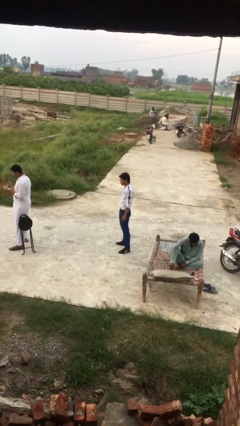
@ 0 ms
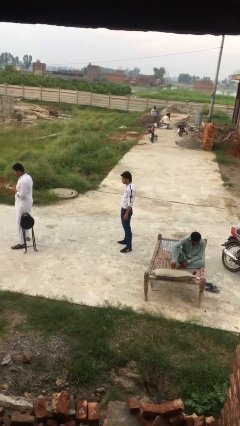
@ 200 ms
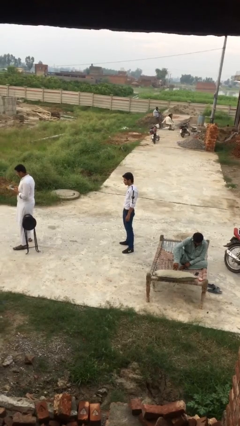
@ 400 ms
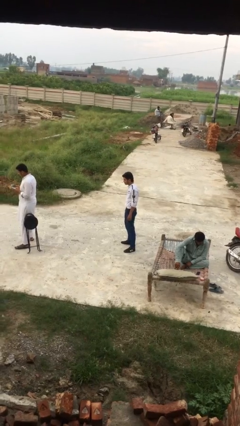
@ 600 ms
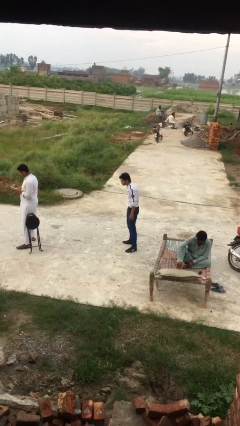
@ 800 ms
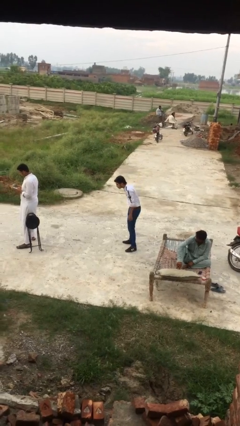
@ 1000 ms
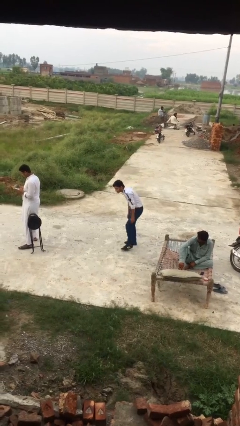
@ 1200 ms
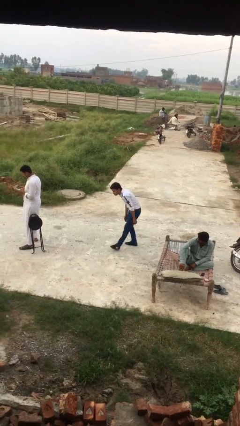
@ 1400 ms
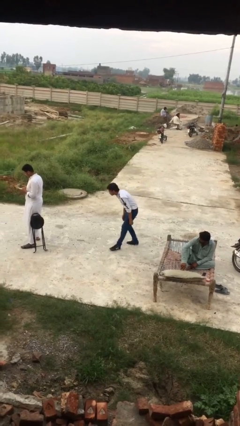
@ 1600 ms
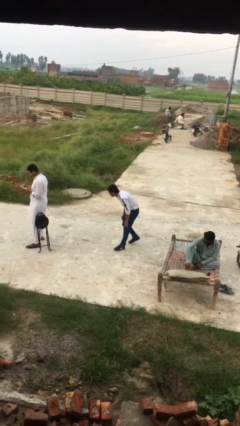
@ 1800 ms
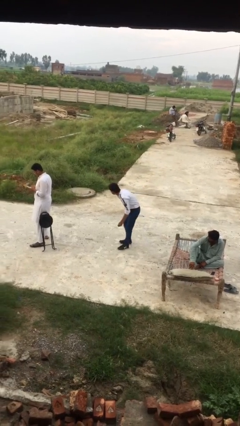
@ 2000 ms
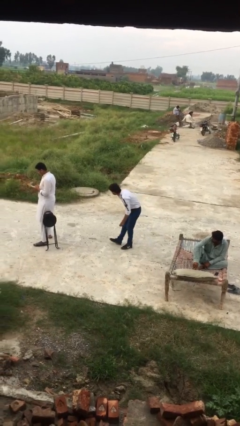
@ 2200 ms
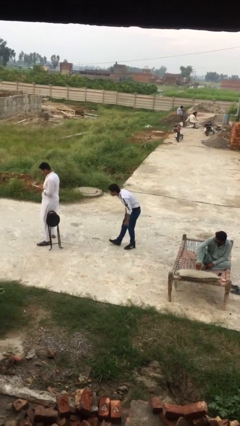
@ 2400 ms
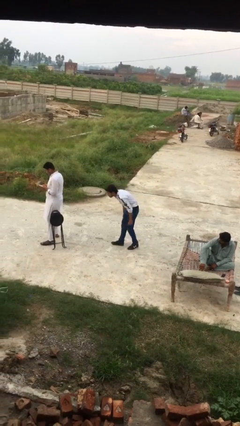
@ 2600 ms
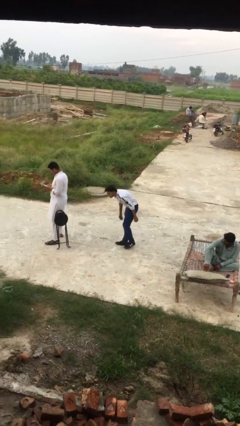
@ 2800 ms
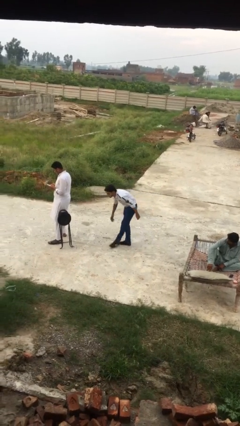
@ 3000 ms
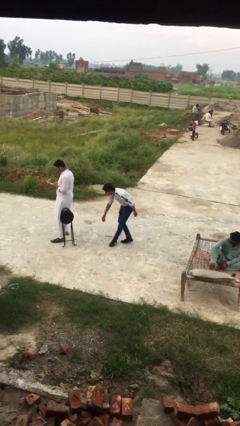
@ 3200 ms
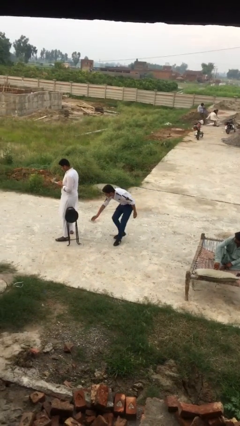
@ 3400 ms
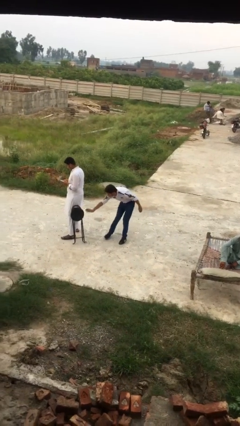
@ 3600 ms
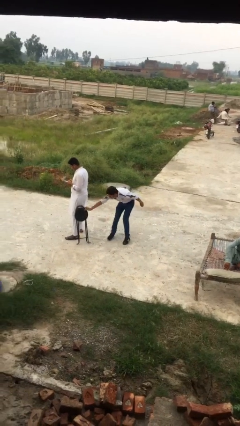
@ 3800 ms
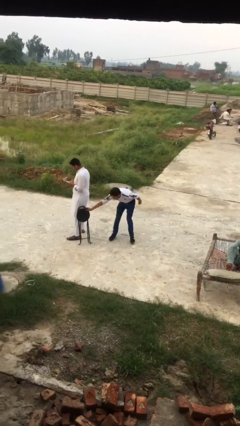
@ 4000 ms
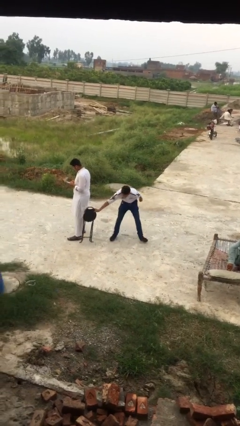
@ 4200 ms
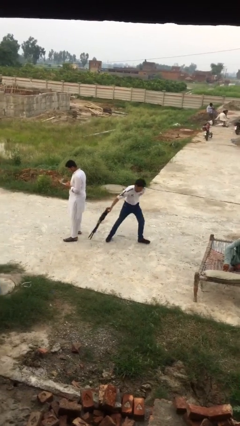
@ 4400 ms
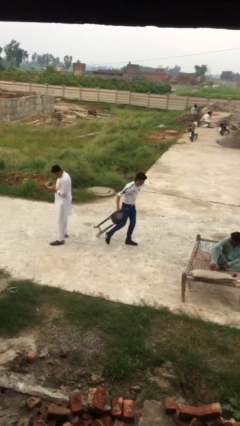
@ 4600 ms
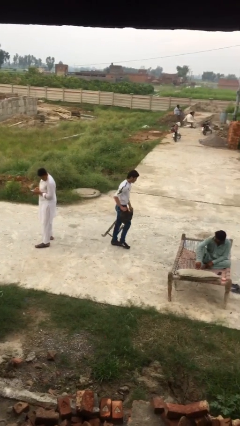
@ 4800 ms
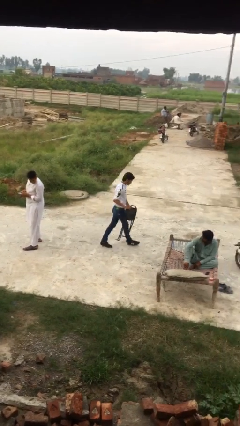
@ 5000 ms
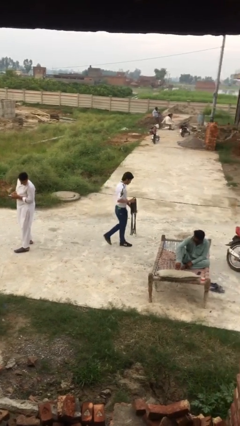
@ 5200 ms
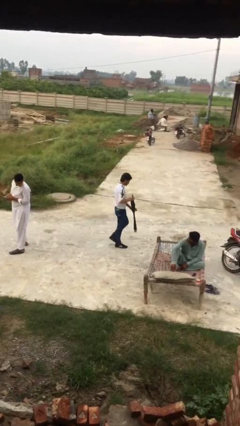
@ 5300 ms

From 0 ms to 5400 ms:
person steals object from person

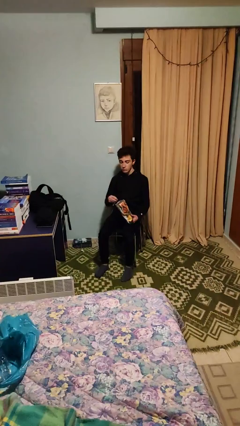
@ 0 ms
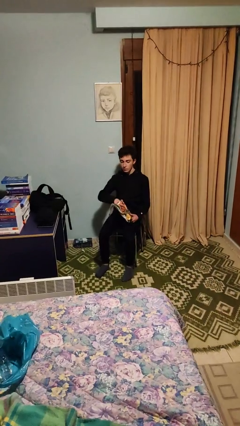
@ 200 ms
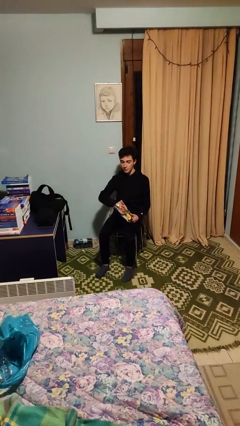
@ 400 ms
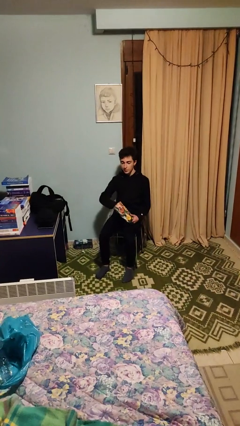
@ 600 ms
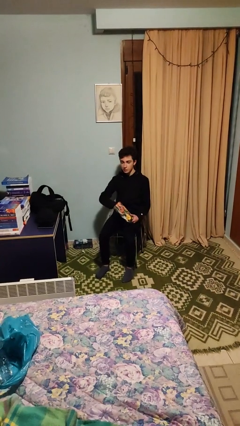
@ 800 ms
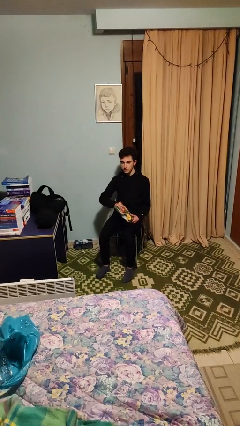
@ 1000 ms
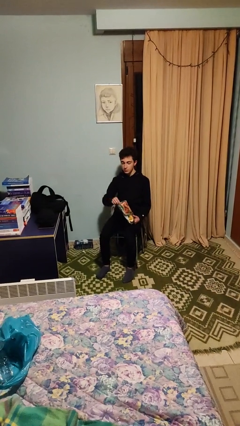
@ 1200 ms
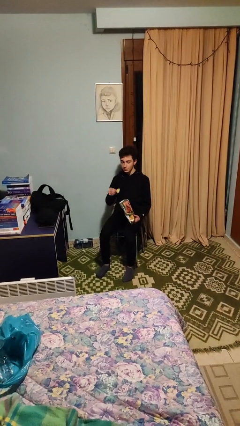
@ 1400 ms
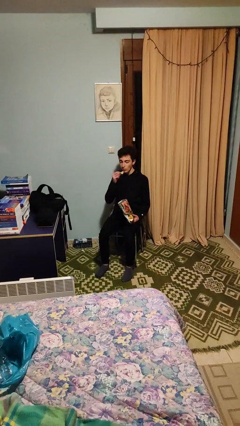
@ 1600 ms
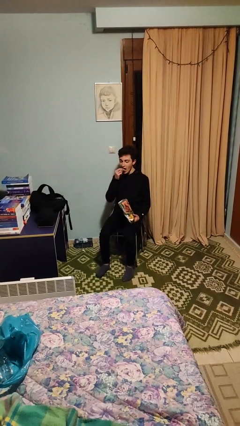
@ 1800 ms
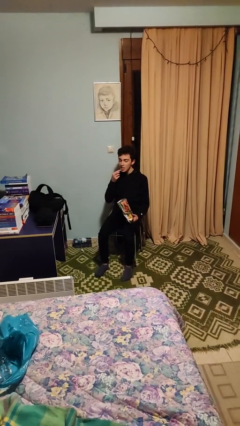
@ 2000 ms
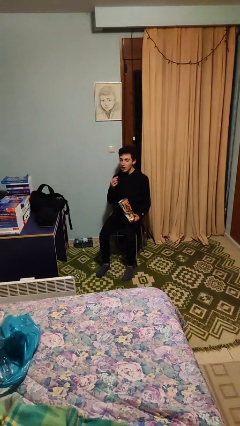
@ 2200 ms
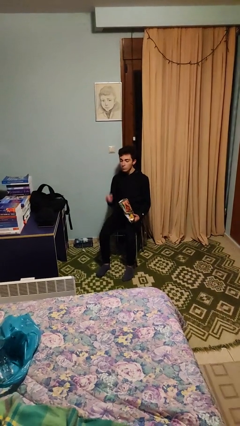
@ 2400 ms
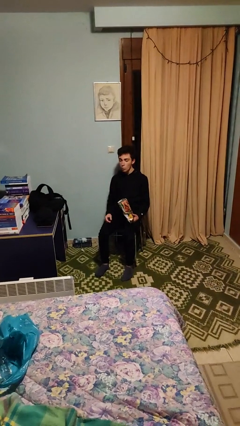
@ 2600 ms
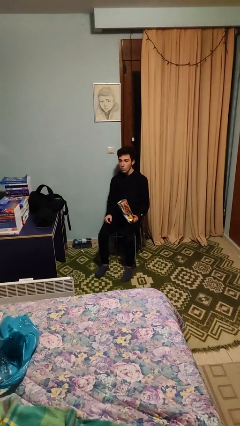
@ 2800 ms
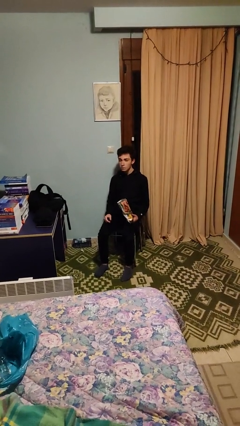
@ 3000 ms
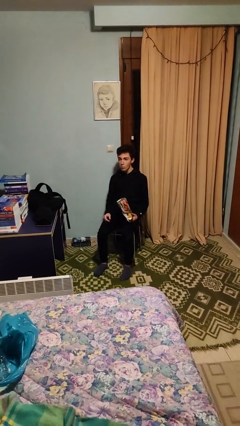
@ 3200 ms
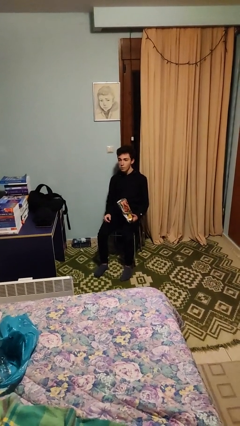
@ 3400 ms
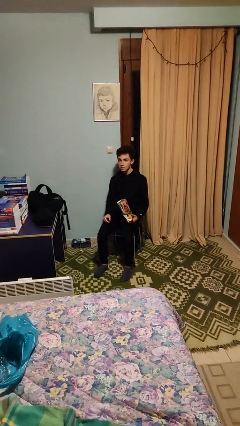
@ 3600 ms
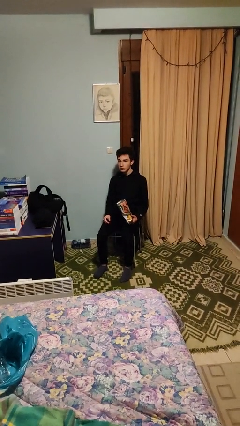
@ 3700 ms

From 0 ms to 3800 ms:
person eats snack from bag

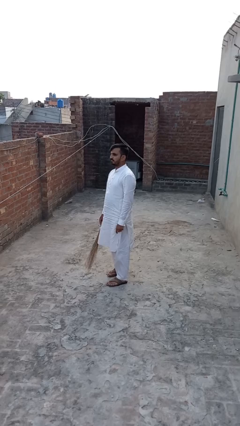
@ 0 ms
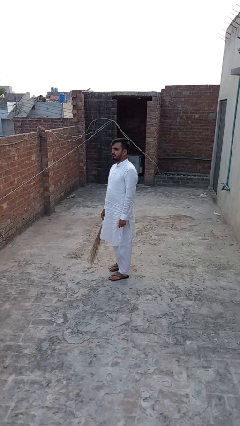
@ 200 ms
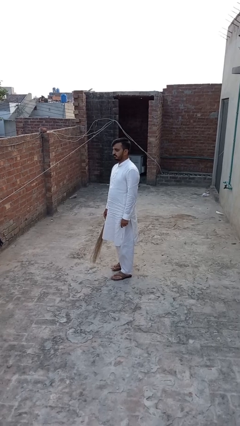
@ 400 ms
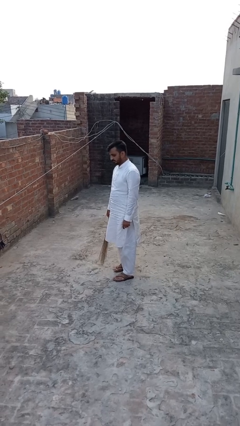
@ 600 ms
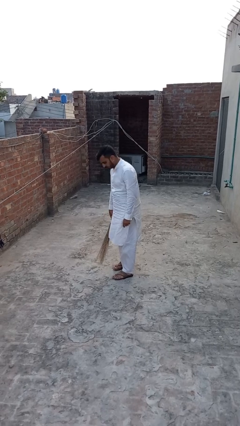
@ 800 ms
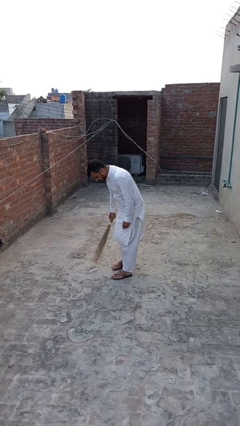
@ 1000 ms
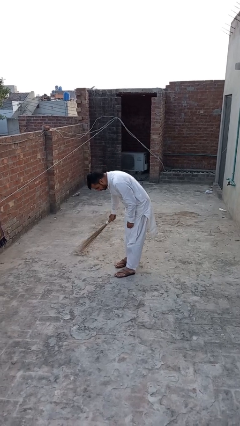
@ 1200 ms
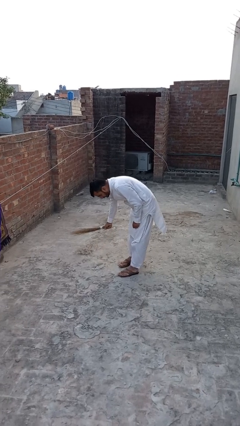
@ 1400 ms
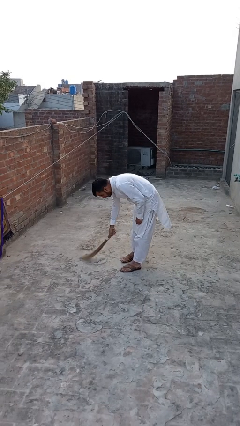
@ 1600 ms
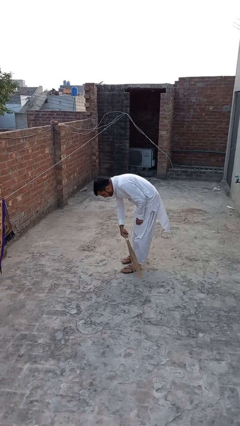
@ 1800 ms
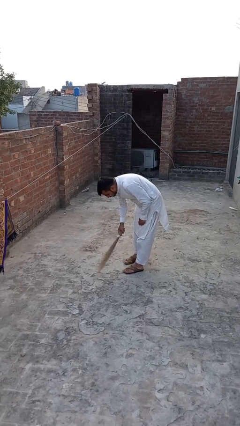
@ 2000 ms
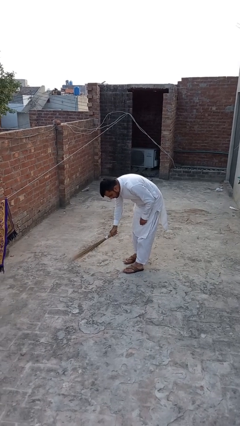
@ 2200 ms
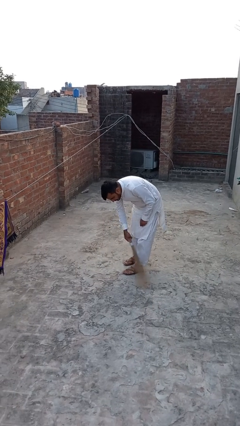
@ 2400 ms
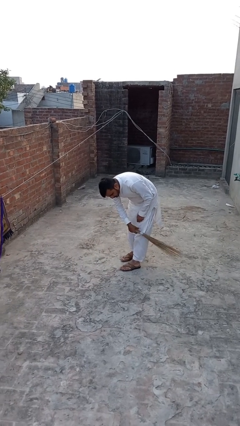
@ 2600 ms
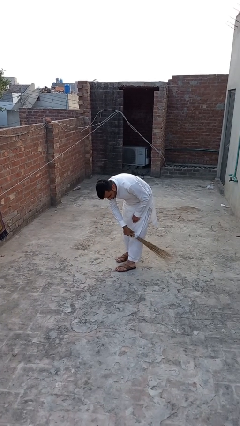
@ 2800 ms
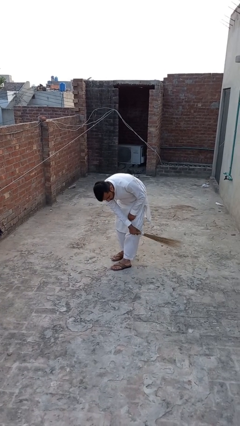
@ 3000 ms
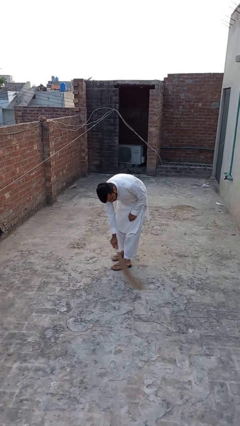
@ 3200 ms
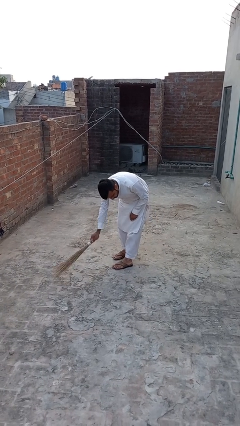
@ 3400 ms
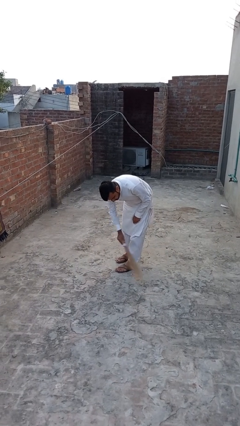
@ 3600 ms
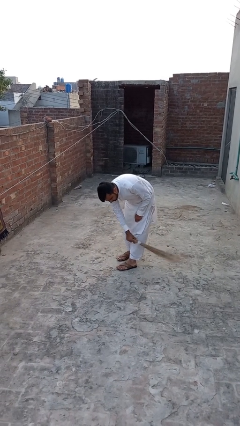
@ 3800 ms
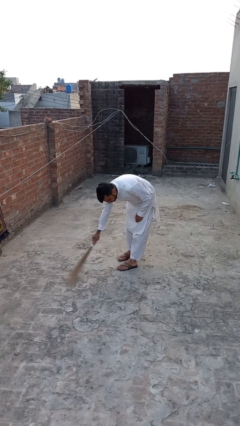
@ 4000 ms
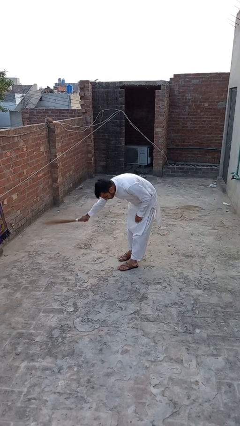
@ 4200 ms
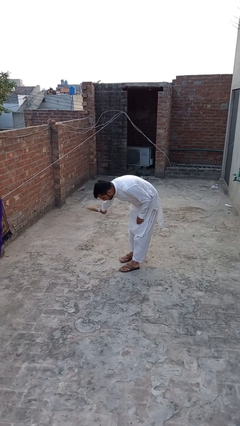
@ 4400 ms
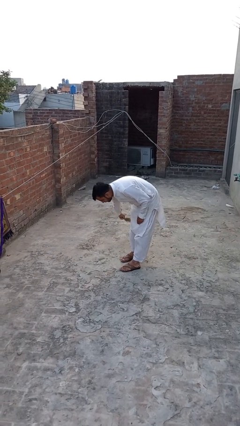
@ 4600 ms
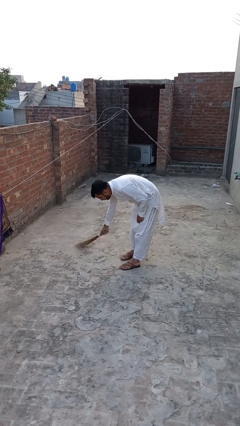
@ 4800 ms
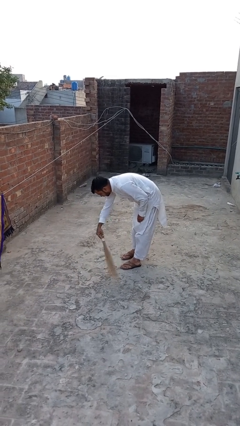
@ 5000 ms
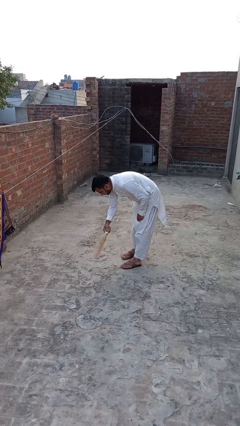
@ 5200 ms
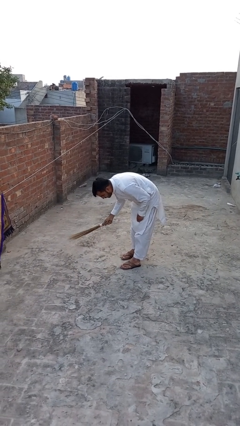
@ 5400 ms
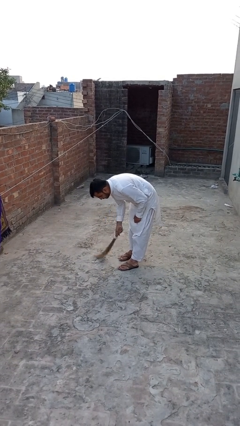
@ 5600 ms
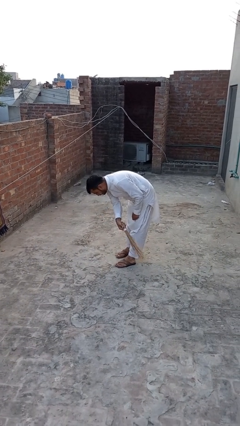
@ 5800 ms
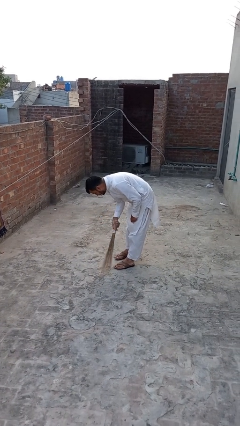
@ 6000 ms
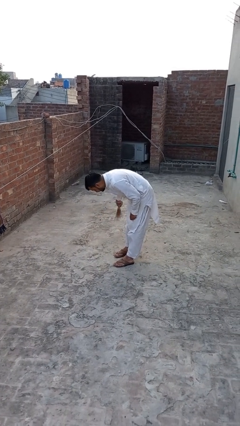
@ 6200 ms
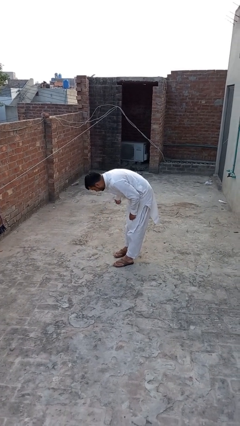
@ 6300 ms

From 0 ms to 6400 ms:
person sweeps floor

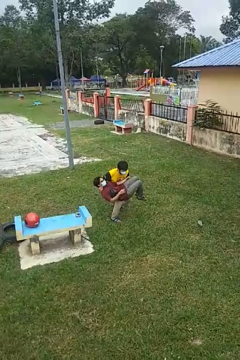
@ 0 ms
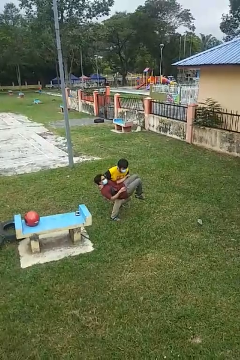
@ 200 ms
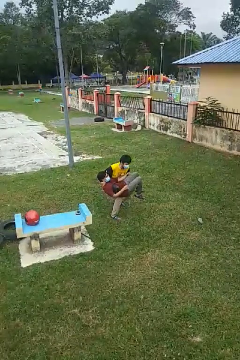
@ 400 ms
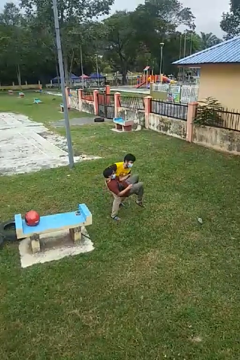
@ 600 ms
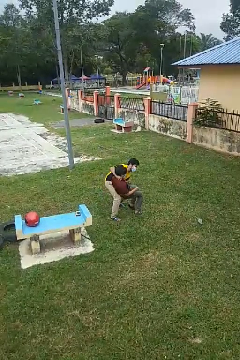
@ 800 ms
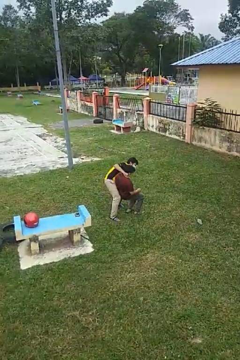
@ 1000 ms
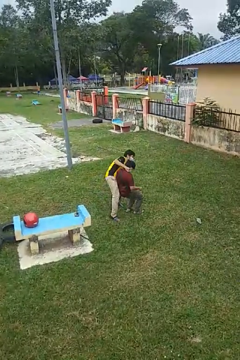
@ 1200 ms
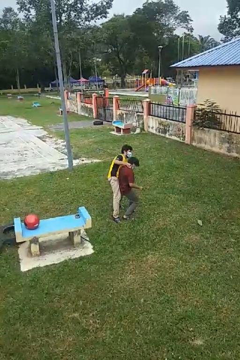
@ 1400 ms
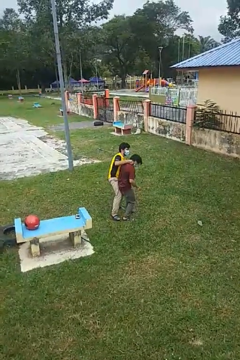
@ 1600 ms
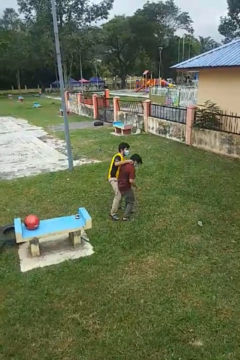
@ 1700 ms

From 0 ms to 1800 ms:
person puts down person

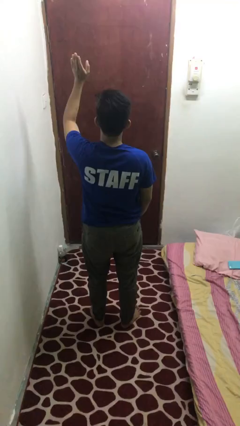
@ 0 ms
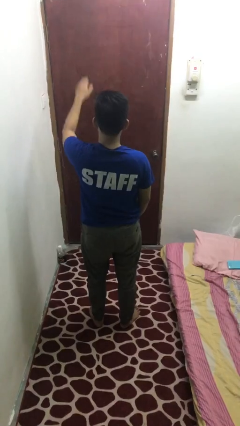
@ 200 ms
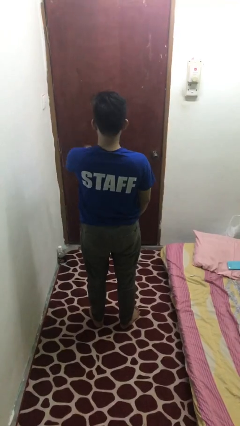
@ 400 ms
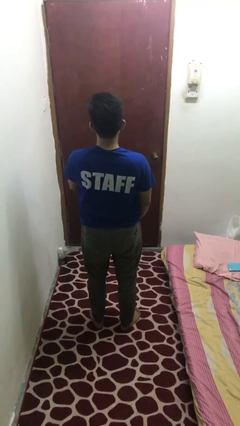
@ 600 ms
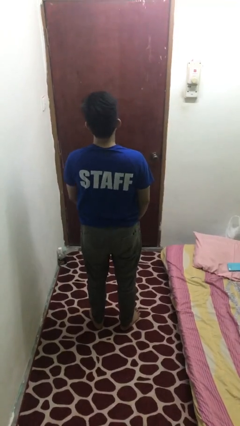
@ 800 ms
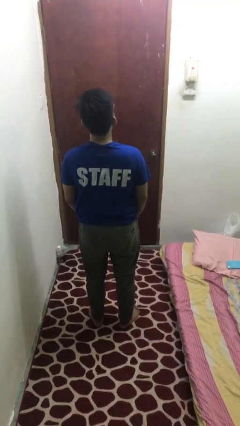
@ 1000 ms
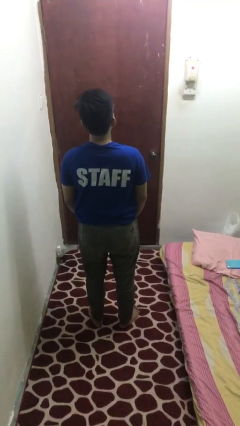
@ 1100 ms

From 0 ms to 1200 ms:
person gestures swipe down
